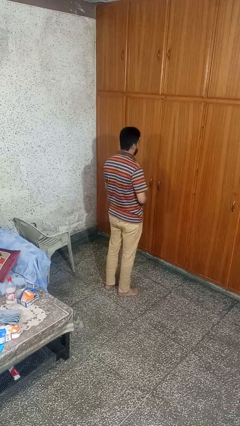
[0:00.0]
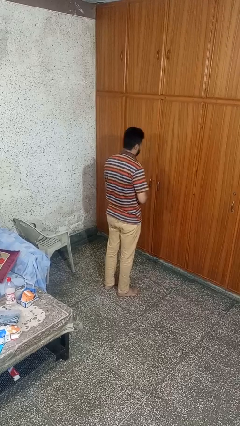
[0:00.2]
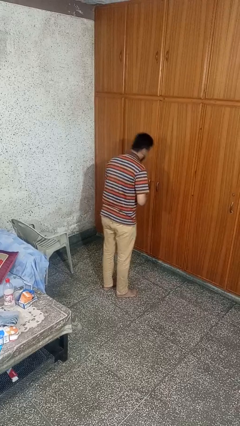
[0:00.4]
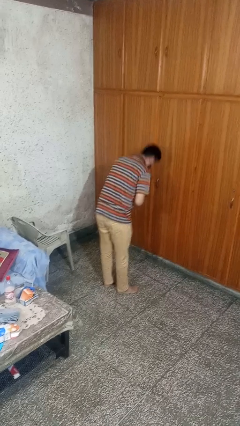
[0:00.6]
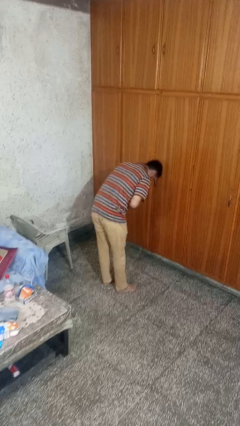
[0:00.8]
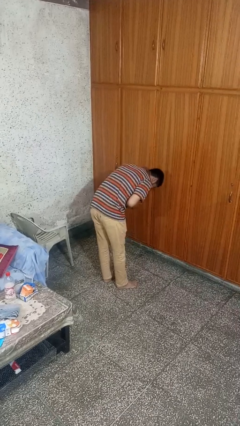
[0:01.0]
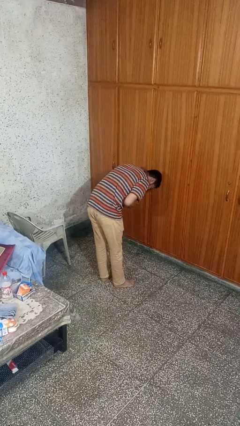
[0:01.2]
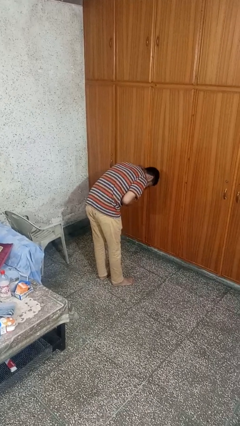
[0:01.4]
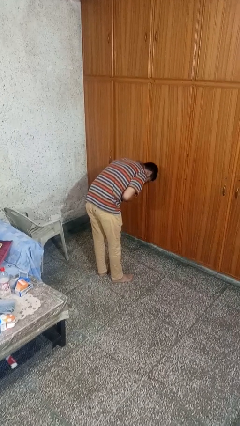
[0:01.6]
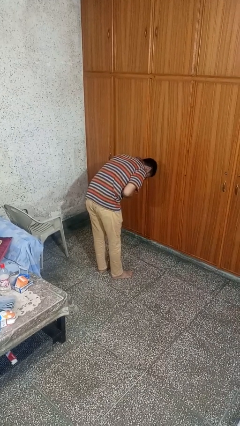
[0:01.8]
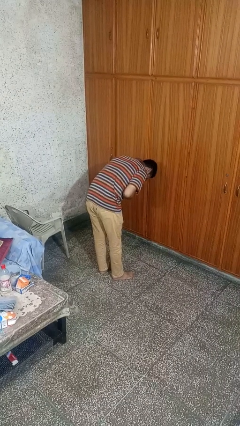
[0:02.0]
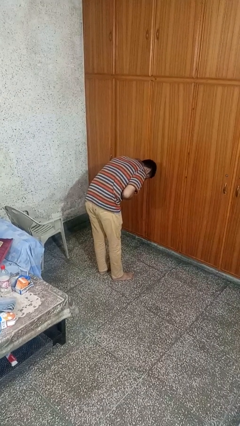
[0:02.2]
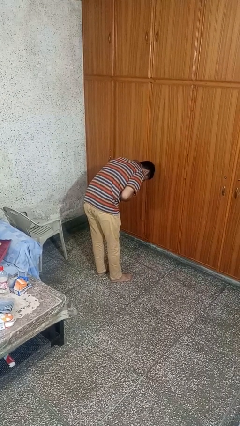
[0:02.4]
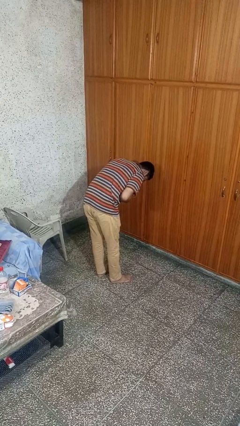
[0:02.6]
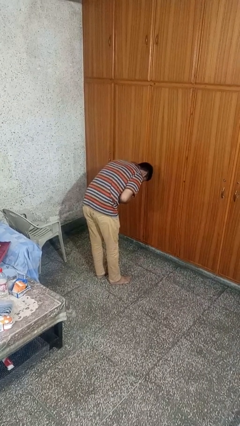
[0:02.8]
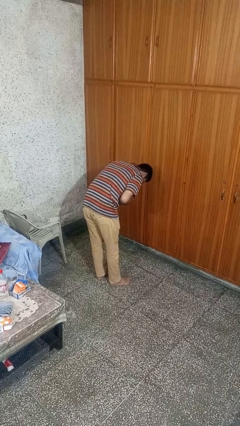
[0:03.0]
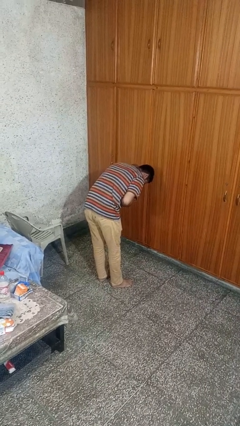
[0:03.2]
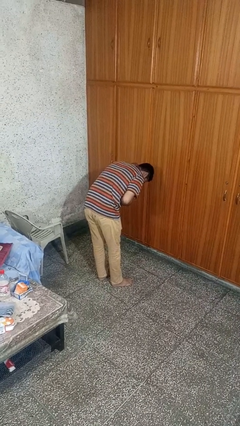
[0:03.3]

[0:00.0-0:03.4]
person bows

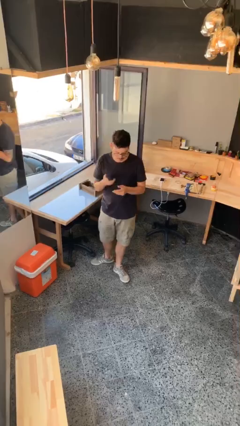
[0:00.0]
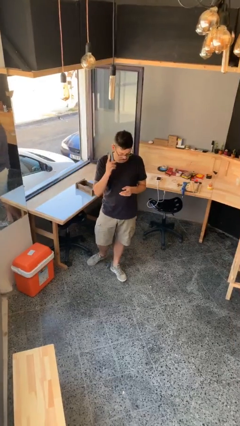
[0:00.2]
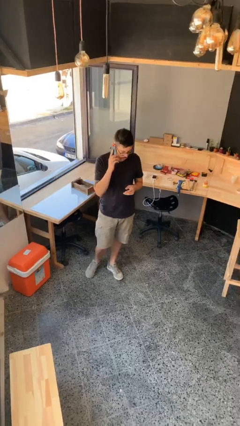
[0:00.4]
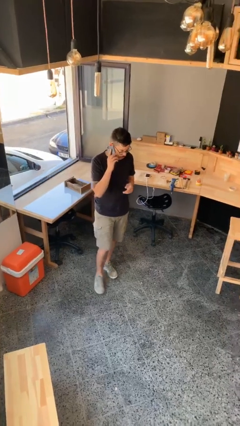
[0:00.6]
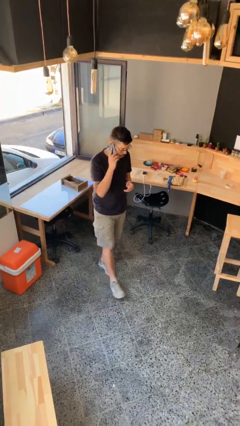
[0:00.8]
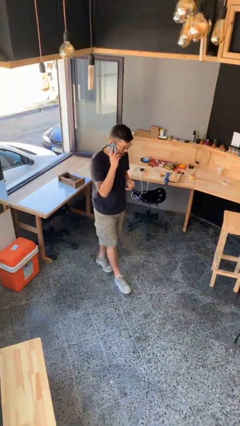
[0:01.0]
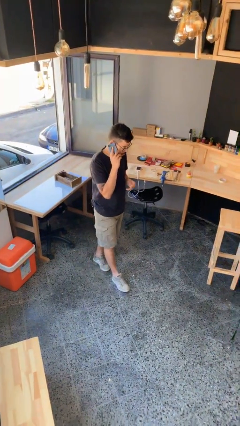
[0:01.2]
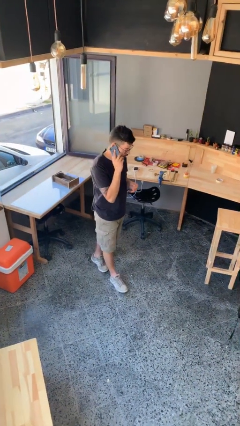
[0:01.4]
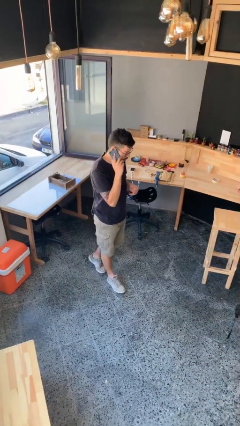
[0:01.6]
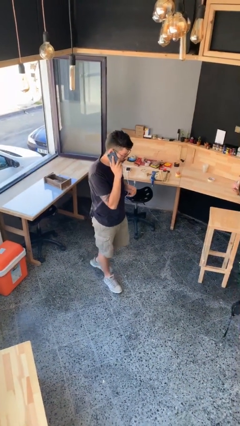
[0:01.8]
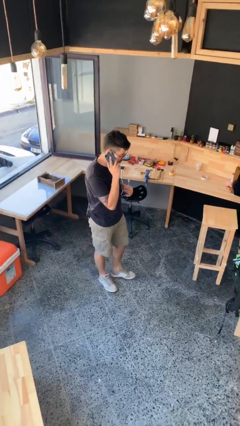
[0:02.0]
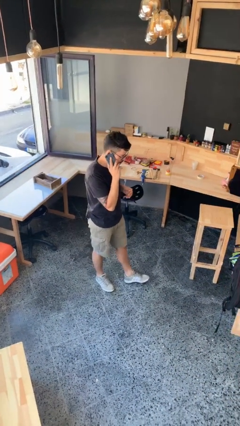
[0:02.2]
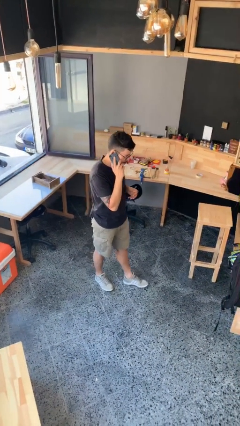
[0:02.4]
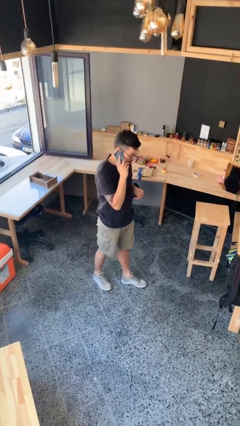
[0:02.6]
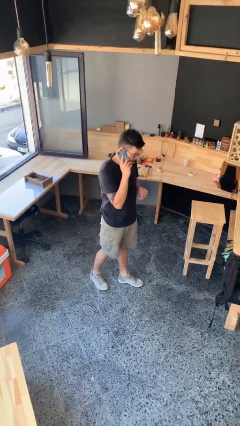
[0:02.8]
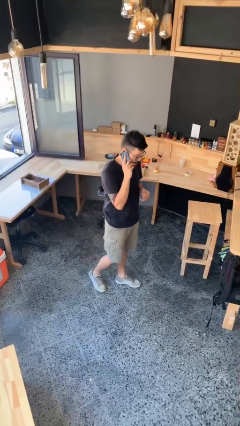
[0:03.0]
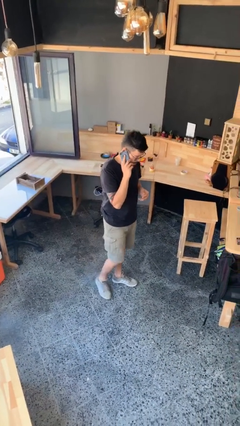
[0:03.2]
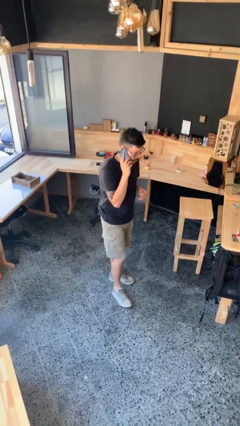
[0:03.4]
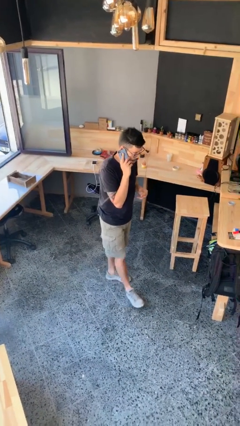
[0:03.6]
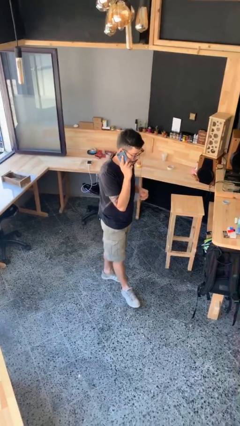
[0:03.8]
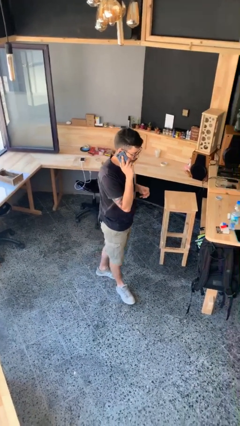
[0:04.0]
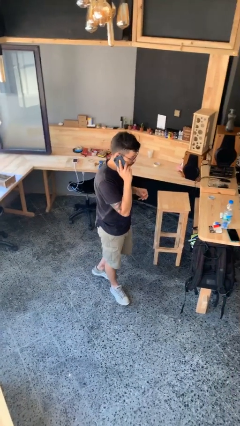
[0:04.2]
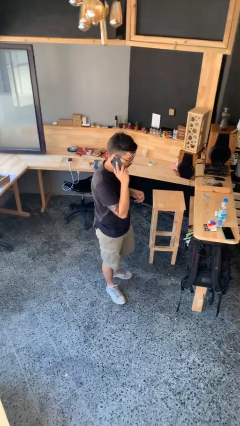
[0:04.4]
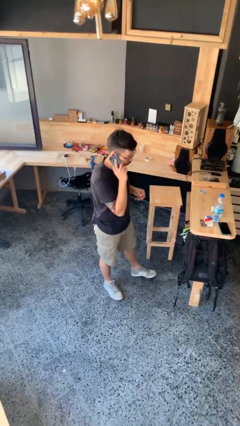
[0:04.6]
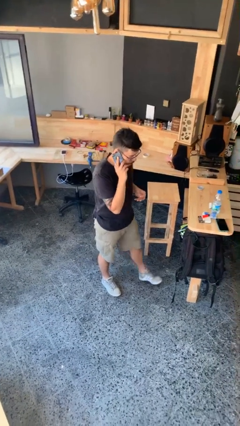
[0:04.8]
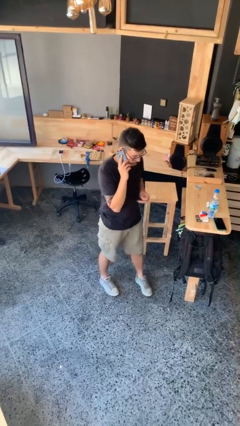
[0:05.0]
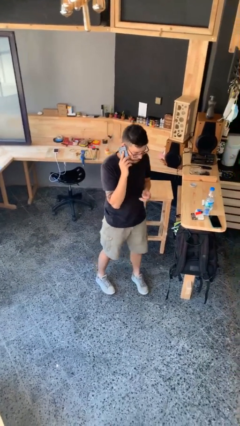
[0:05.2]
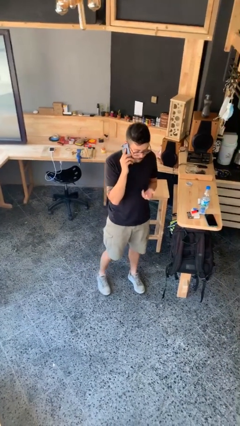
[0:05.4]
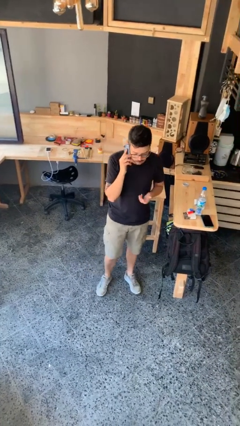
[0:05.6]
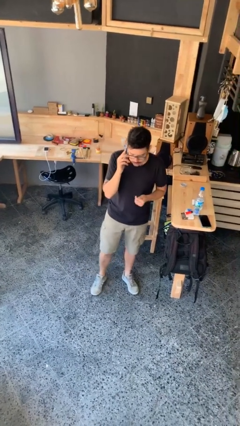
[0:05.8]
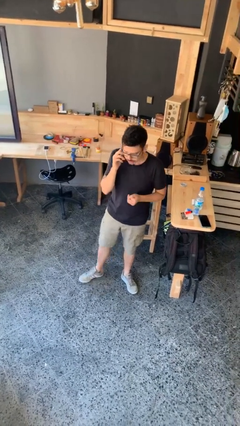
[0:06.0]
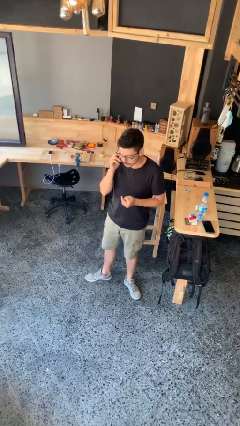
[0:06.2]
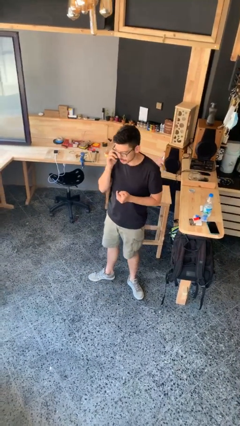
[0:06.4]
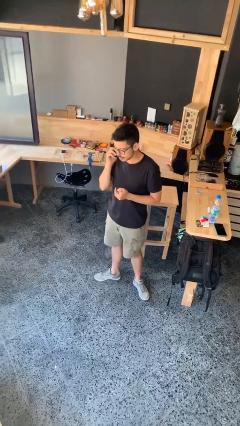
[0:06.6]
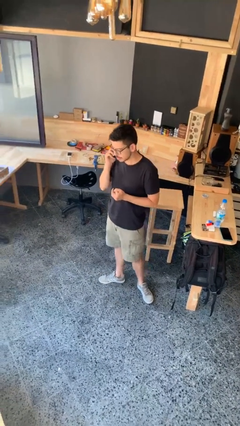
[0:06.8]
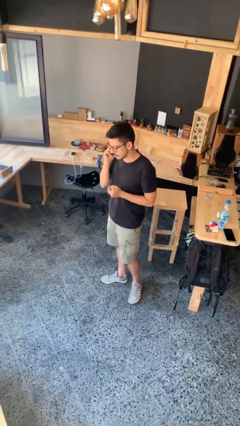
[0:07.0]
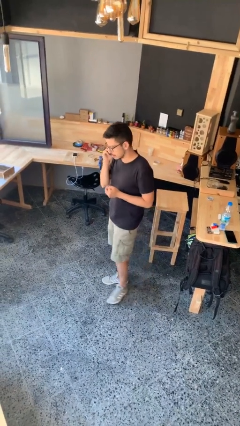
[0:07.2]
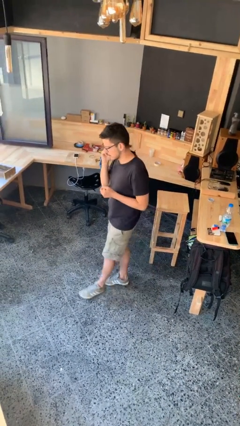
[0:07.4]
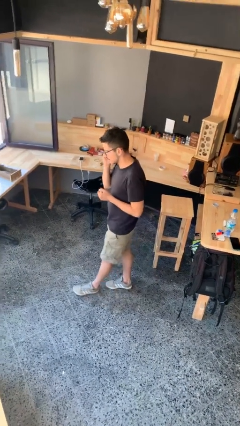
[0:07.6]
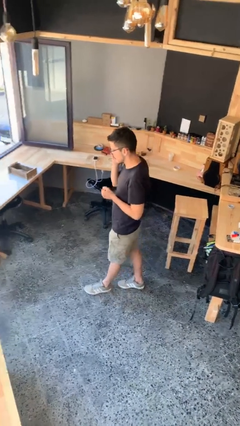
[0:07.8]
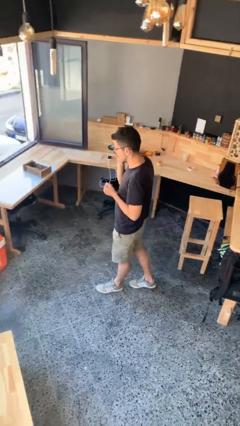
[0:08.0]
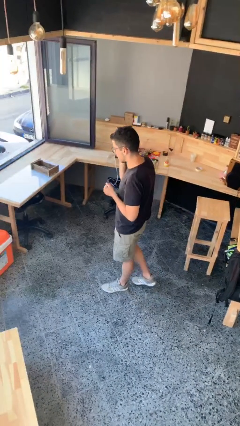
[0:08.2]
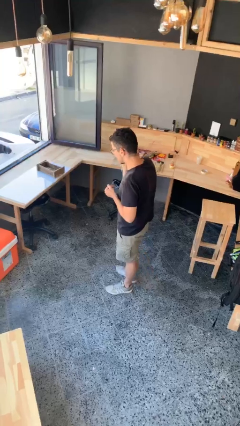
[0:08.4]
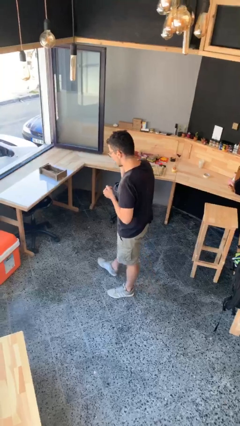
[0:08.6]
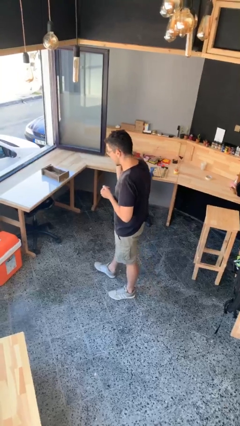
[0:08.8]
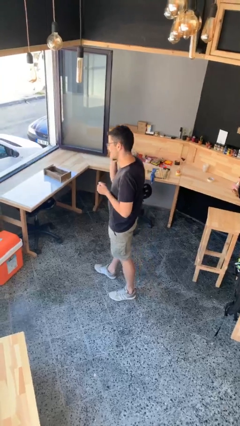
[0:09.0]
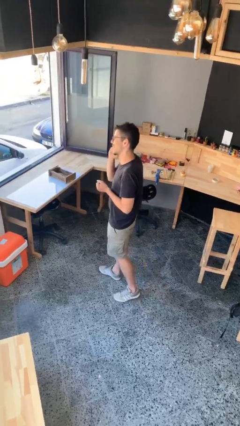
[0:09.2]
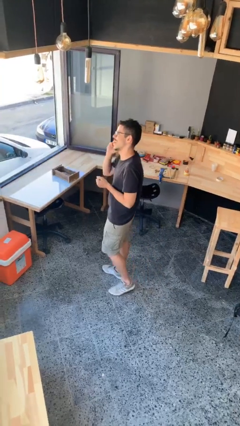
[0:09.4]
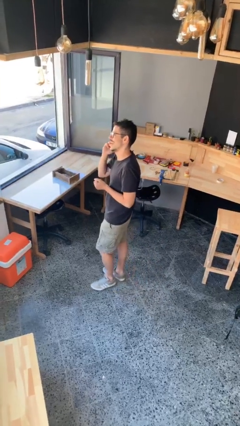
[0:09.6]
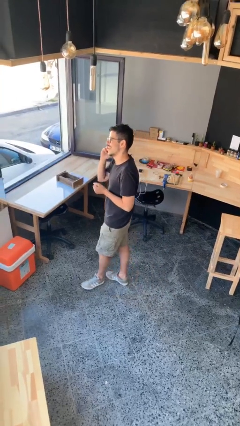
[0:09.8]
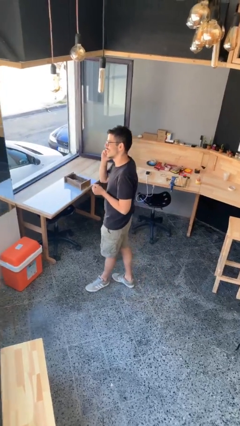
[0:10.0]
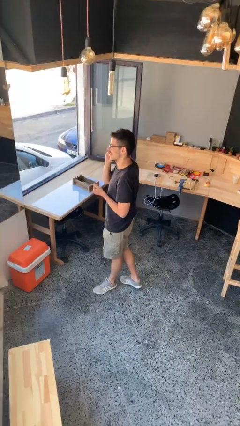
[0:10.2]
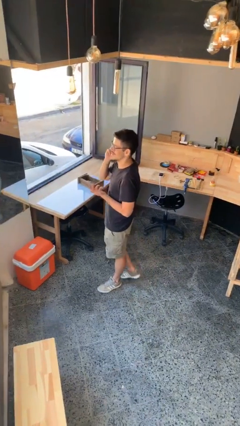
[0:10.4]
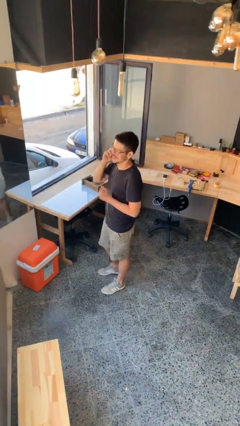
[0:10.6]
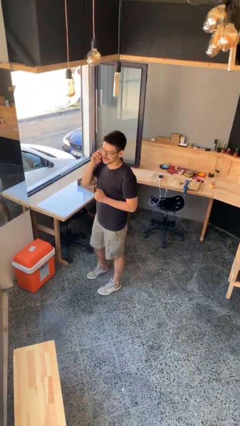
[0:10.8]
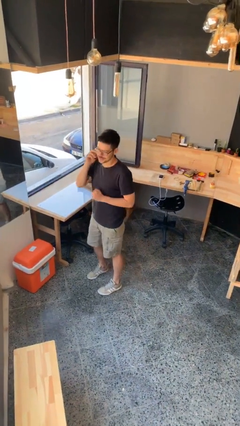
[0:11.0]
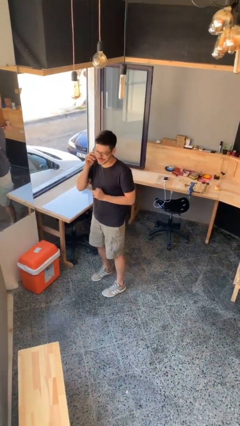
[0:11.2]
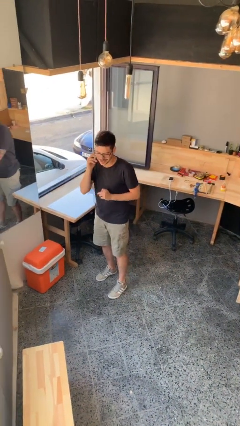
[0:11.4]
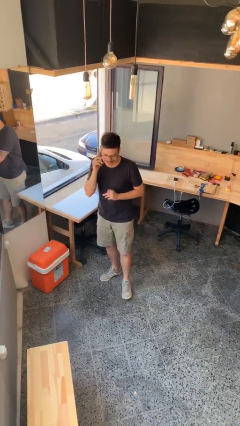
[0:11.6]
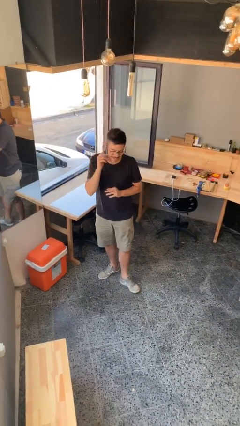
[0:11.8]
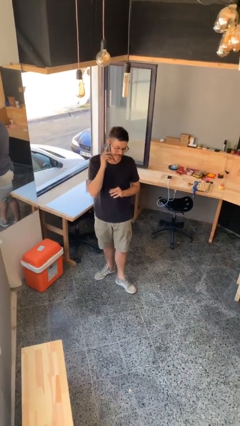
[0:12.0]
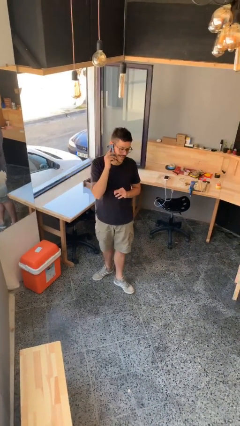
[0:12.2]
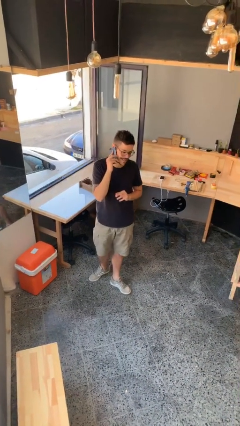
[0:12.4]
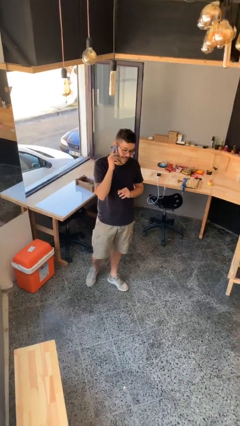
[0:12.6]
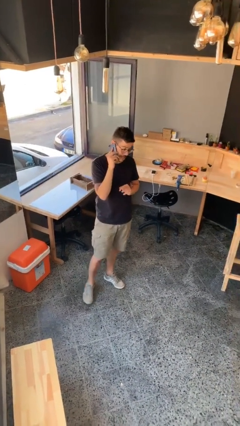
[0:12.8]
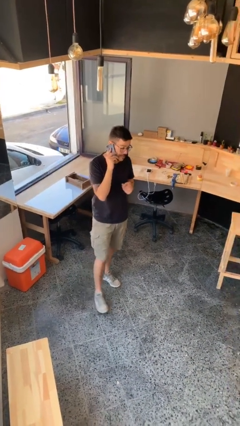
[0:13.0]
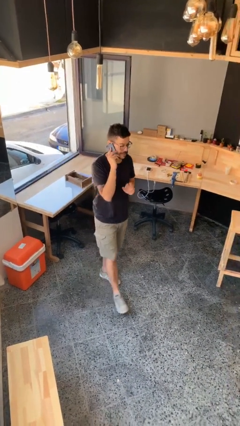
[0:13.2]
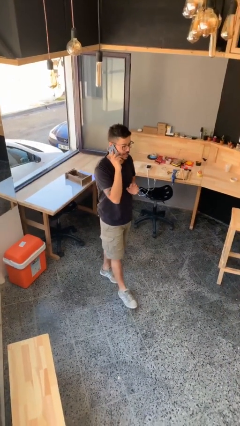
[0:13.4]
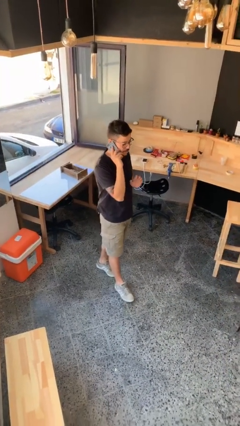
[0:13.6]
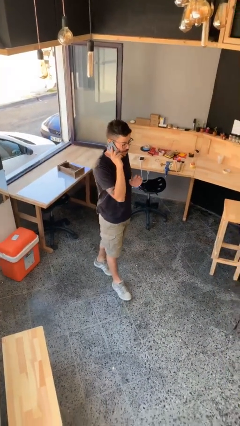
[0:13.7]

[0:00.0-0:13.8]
person talks on phone

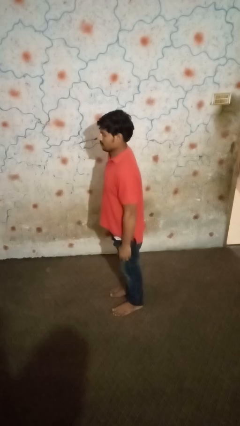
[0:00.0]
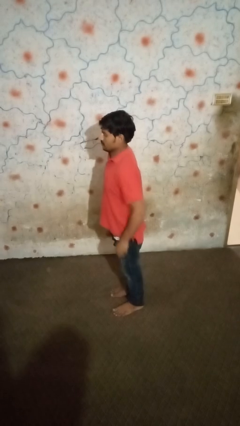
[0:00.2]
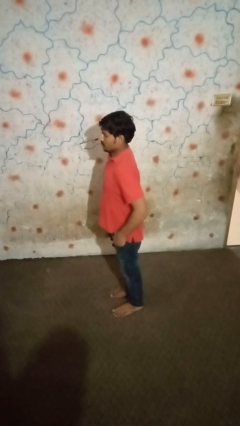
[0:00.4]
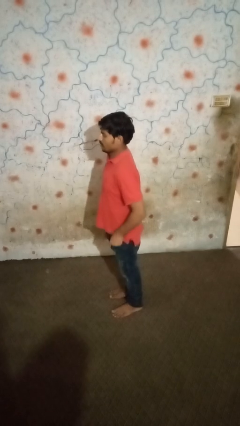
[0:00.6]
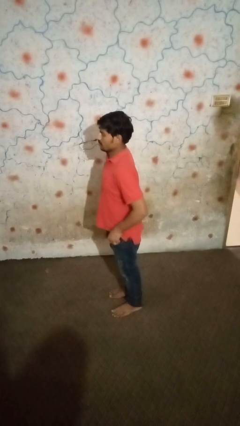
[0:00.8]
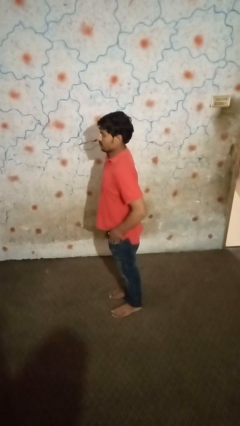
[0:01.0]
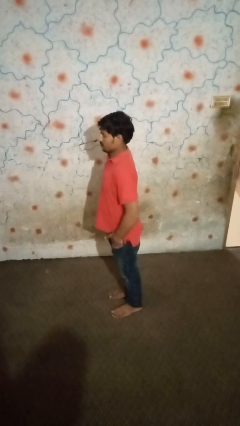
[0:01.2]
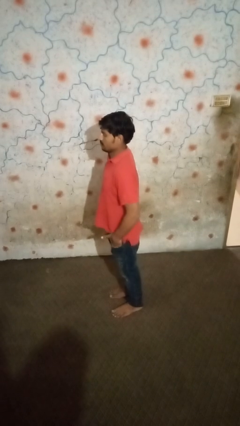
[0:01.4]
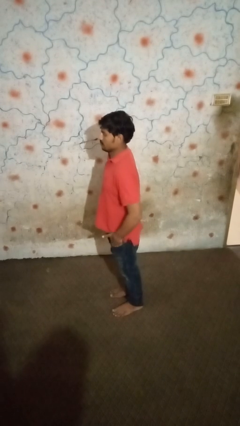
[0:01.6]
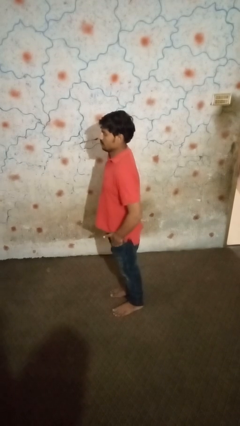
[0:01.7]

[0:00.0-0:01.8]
person puts hands in back pockets
